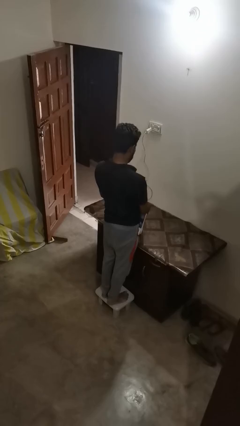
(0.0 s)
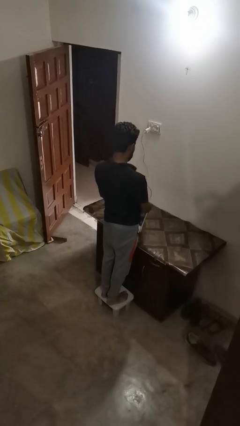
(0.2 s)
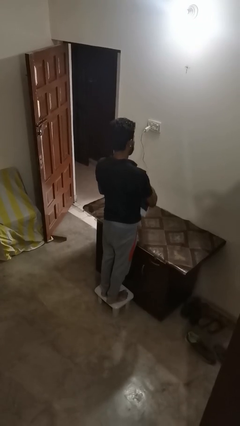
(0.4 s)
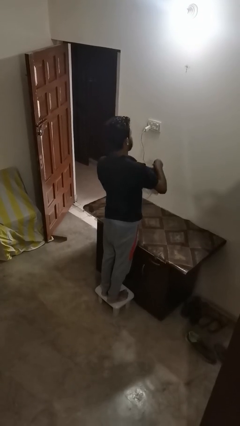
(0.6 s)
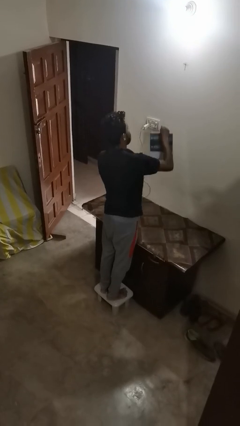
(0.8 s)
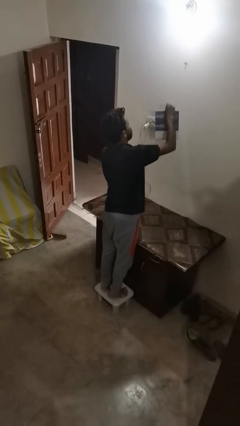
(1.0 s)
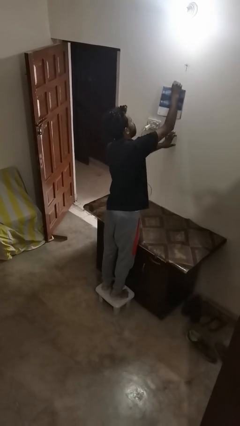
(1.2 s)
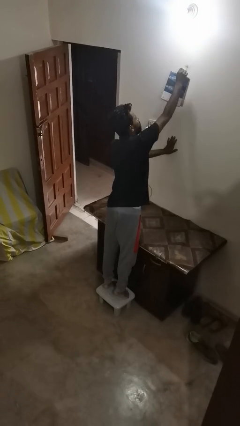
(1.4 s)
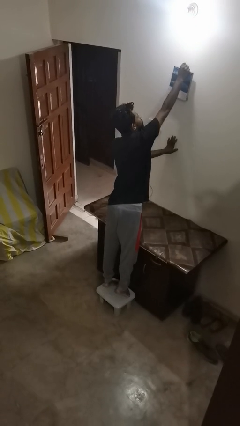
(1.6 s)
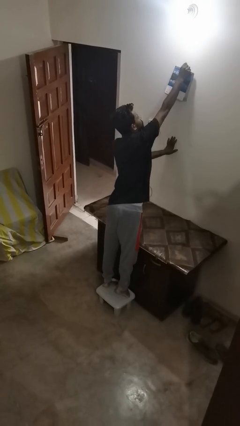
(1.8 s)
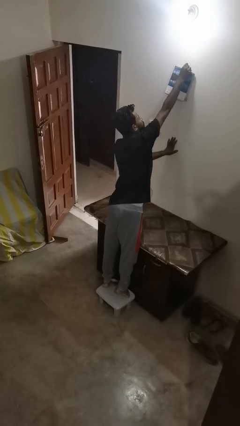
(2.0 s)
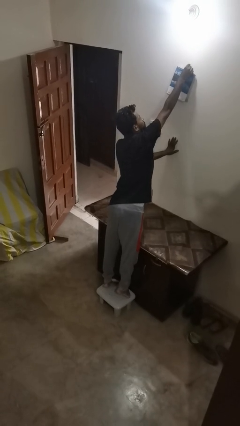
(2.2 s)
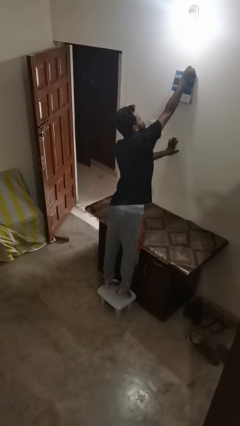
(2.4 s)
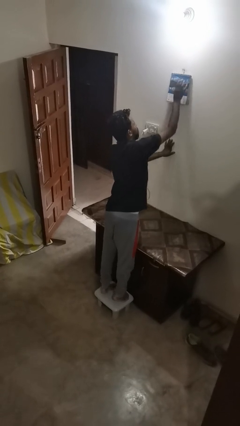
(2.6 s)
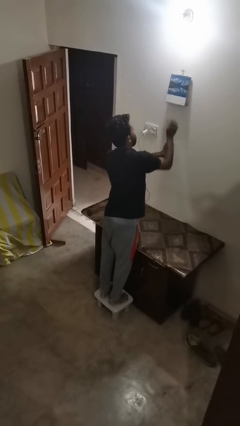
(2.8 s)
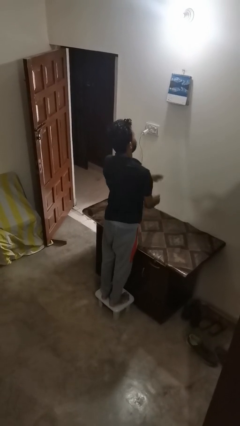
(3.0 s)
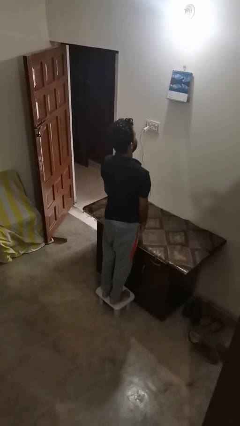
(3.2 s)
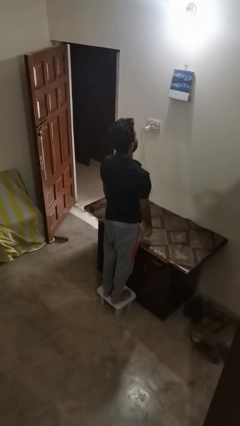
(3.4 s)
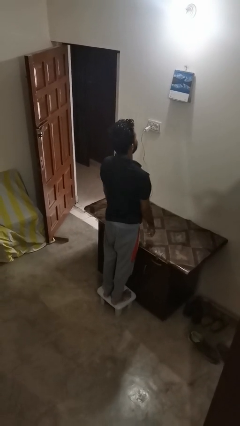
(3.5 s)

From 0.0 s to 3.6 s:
person puts up picture frame

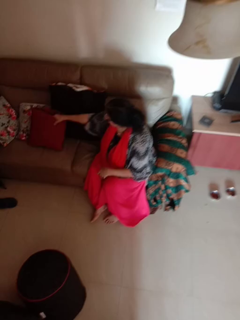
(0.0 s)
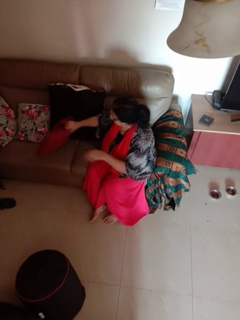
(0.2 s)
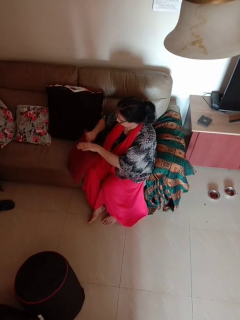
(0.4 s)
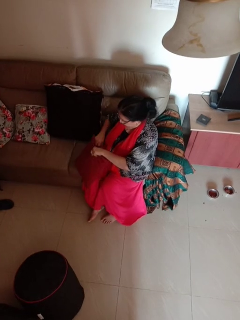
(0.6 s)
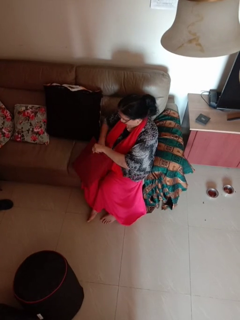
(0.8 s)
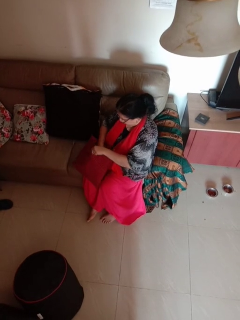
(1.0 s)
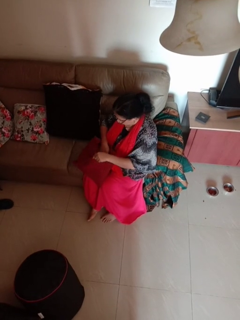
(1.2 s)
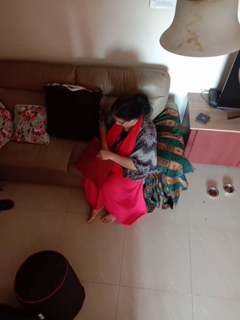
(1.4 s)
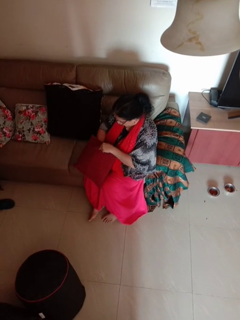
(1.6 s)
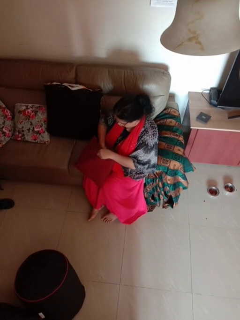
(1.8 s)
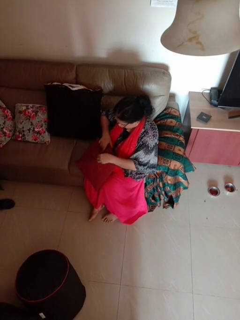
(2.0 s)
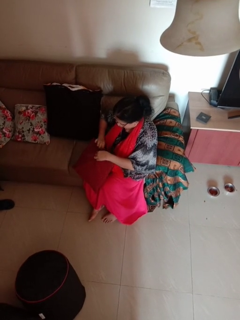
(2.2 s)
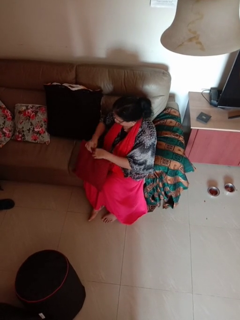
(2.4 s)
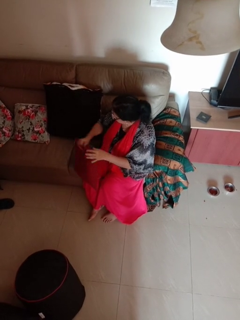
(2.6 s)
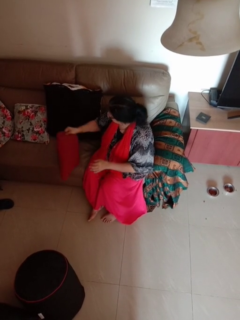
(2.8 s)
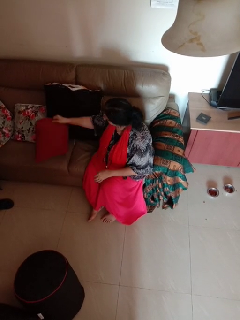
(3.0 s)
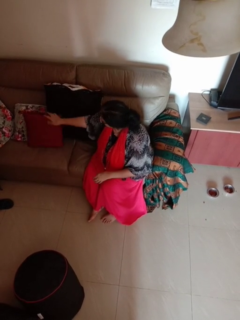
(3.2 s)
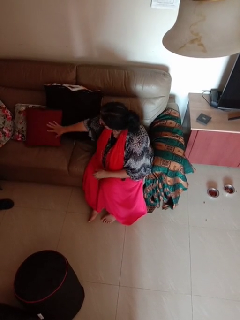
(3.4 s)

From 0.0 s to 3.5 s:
person searches in couch

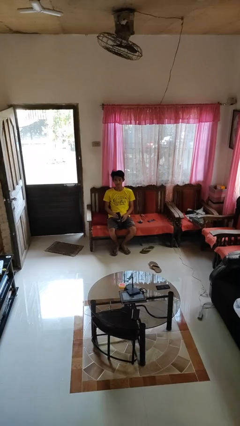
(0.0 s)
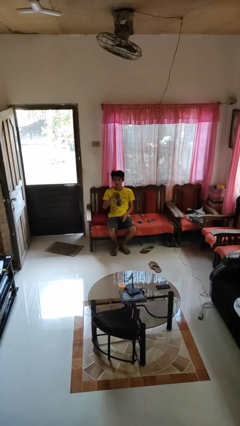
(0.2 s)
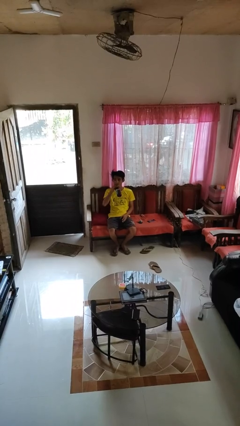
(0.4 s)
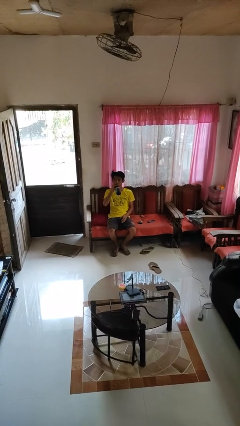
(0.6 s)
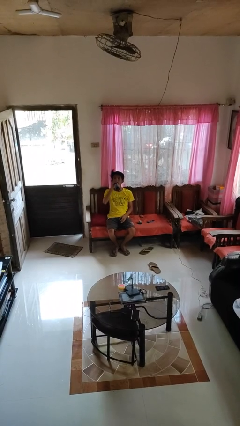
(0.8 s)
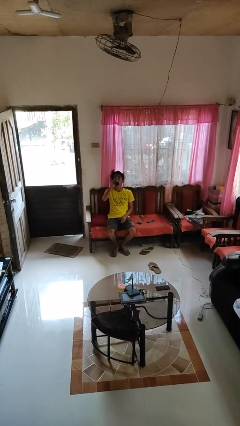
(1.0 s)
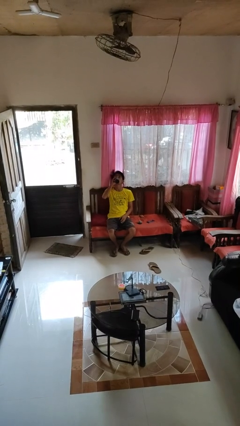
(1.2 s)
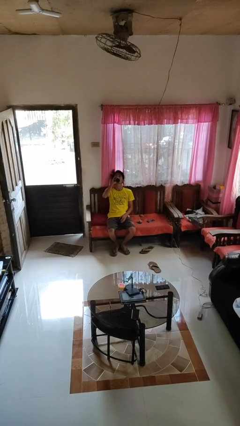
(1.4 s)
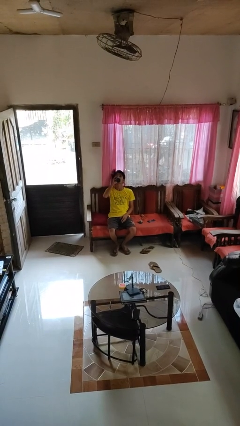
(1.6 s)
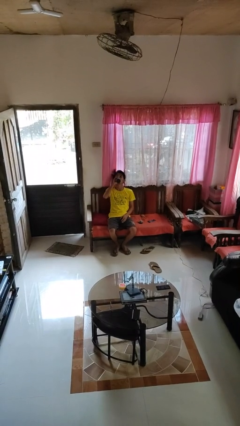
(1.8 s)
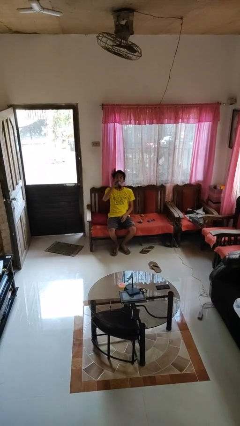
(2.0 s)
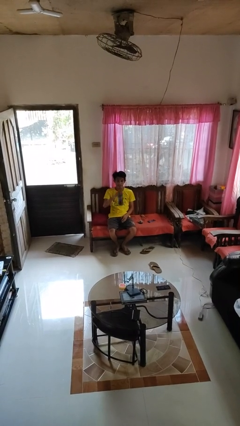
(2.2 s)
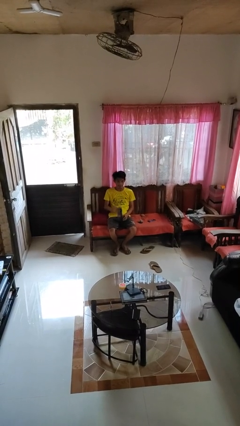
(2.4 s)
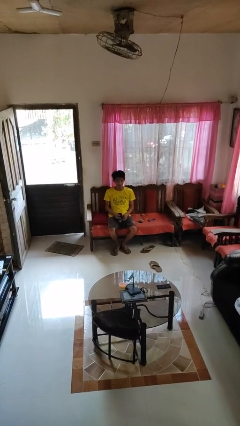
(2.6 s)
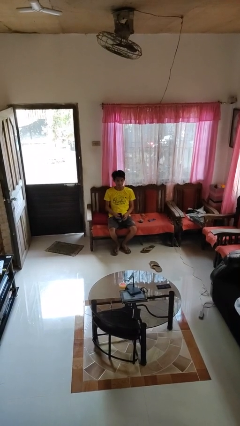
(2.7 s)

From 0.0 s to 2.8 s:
person drinks from bottle

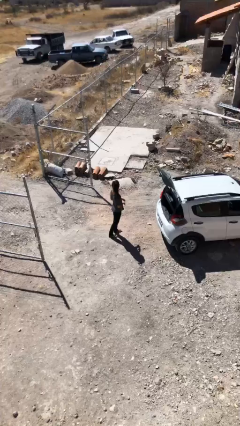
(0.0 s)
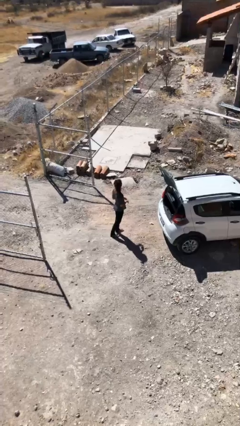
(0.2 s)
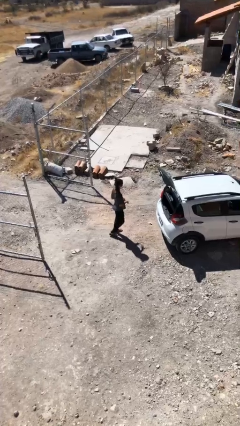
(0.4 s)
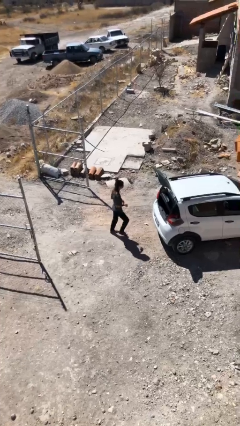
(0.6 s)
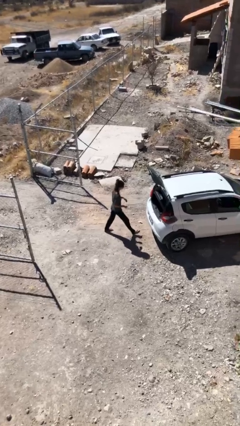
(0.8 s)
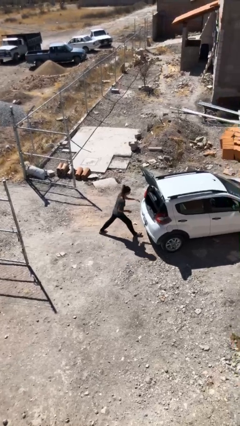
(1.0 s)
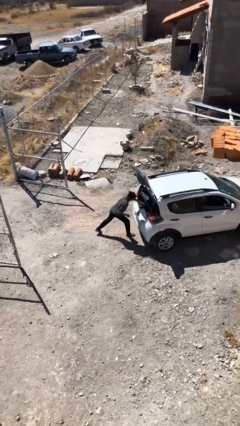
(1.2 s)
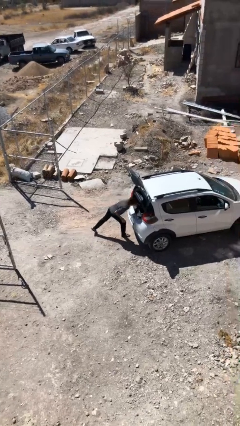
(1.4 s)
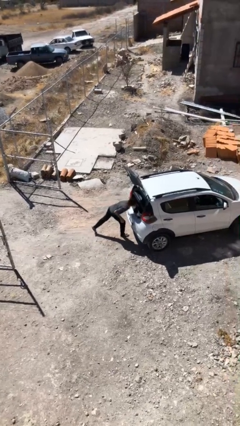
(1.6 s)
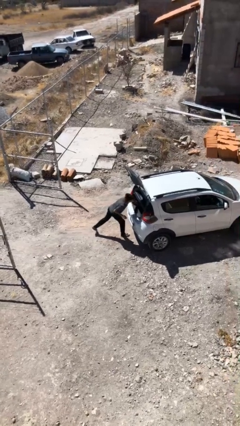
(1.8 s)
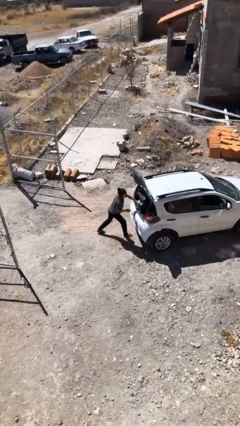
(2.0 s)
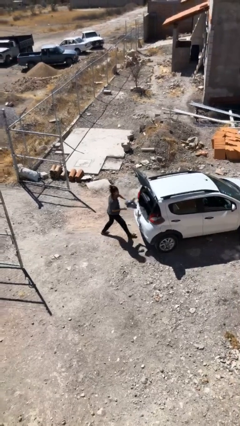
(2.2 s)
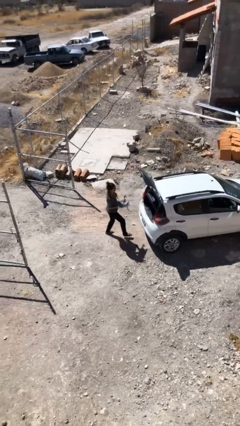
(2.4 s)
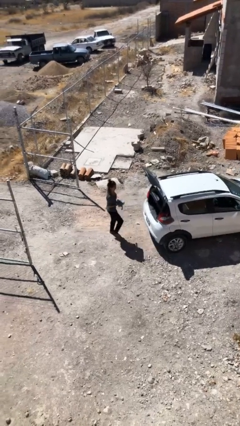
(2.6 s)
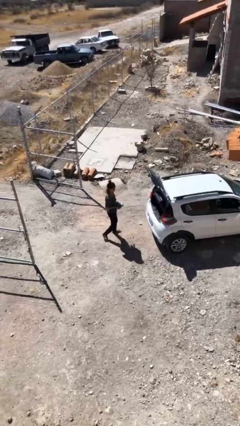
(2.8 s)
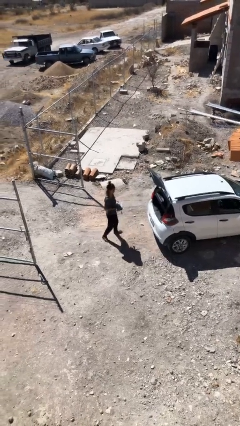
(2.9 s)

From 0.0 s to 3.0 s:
person unloads car

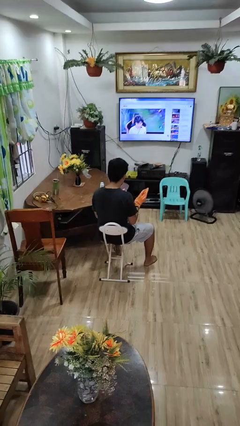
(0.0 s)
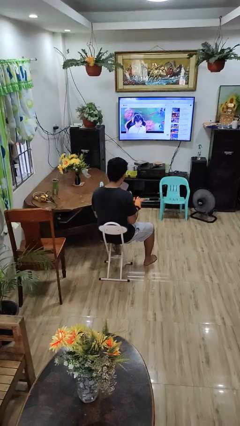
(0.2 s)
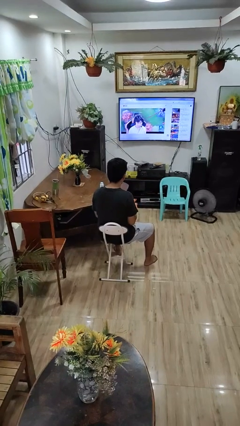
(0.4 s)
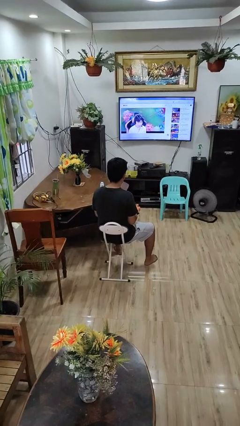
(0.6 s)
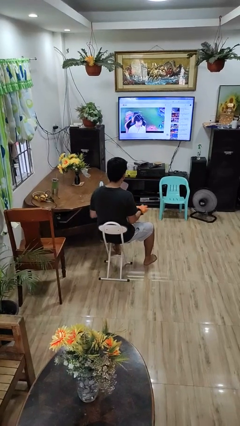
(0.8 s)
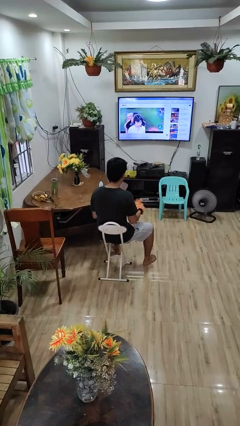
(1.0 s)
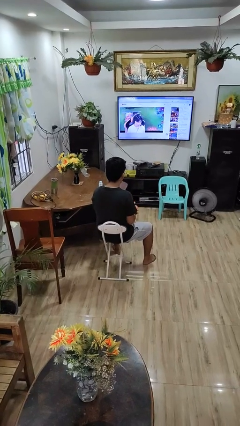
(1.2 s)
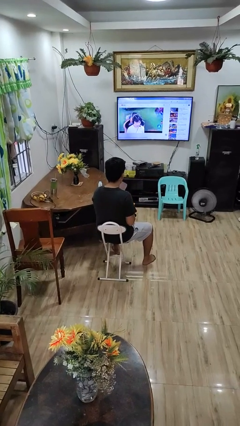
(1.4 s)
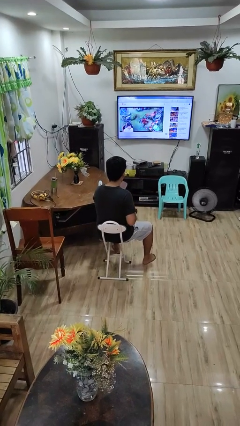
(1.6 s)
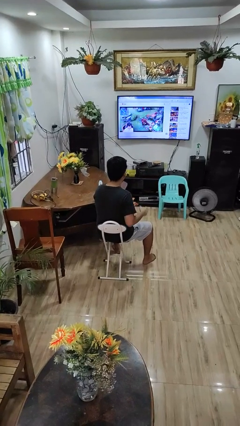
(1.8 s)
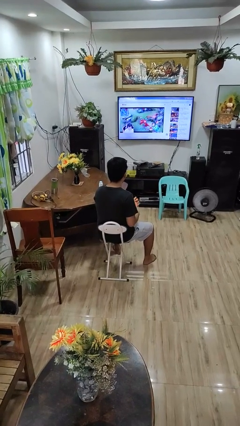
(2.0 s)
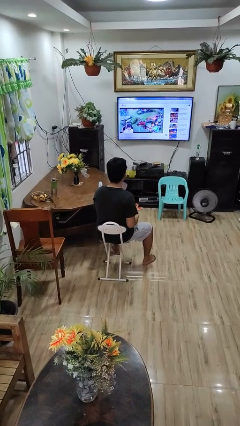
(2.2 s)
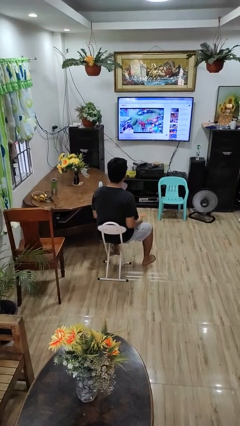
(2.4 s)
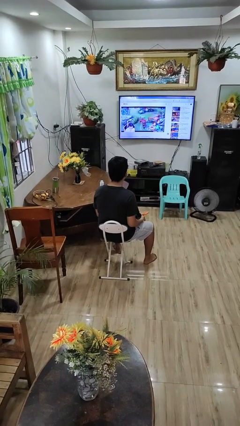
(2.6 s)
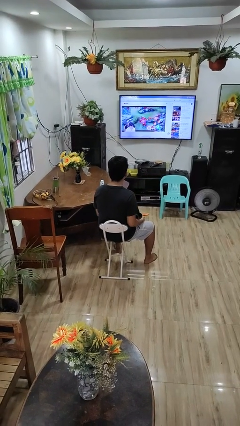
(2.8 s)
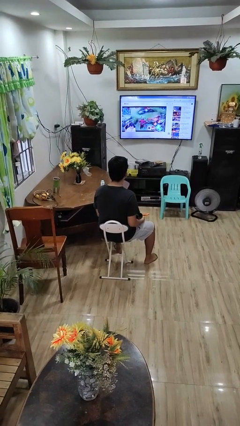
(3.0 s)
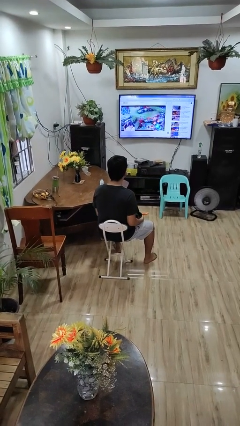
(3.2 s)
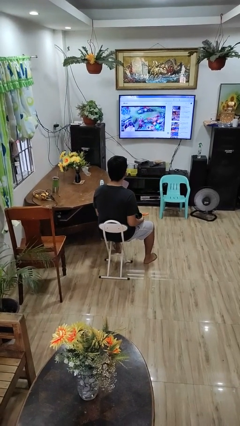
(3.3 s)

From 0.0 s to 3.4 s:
person takes off gloves

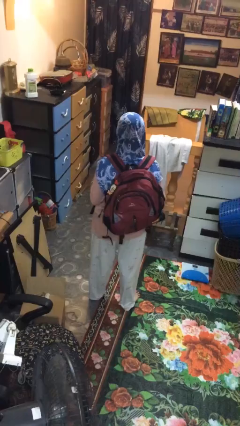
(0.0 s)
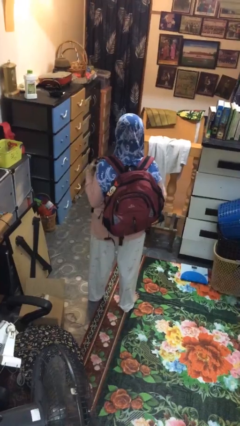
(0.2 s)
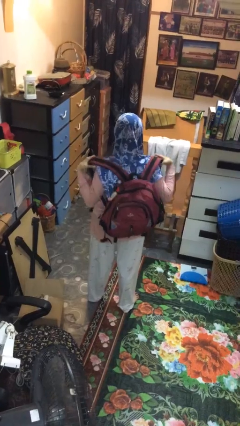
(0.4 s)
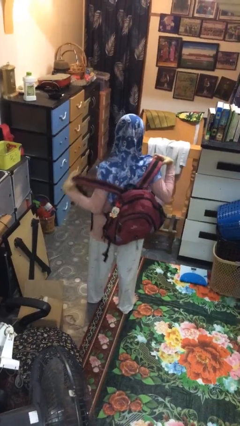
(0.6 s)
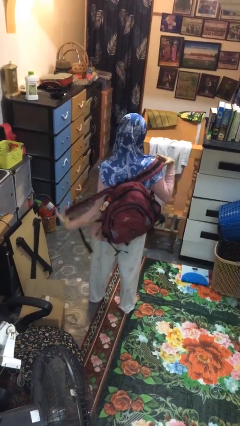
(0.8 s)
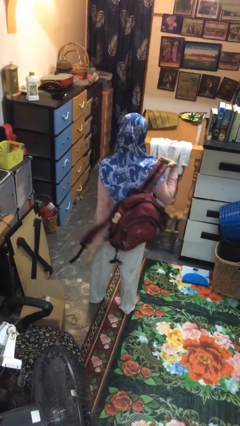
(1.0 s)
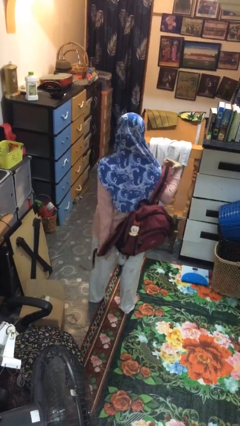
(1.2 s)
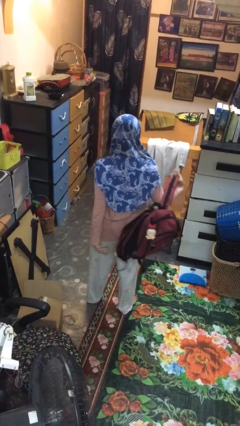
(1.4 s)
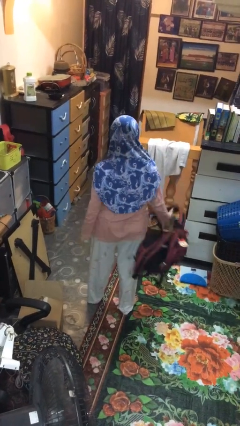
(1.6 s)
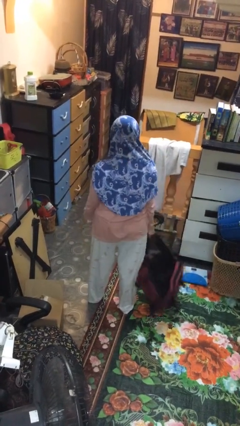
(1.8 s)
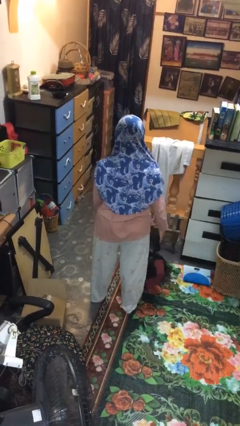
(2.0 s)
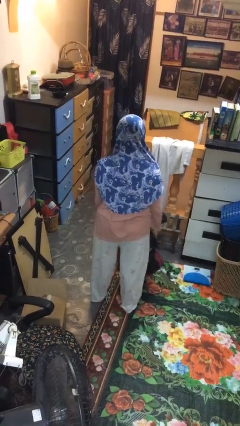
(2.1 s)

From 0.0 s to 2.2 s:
person takes off backpack
